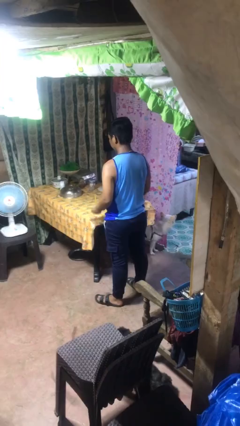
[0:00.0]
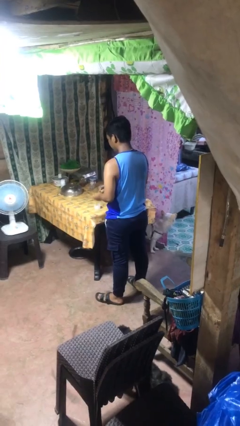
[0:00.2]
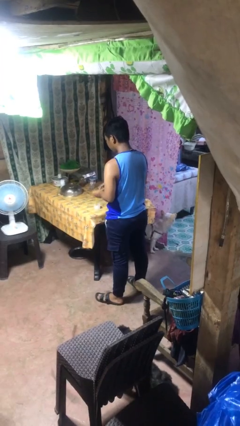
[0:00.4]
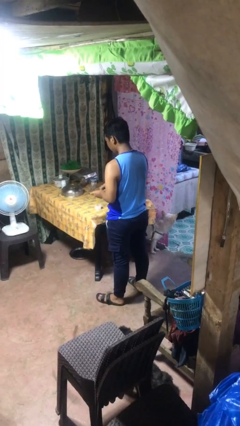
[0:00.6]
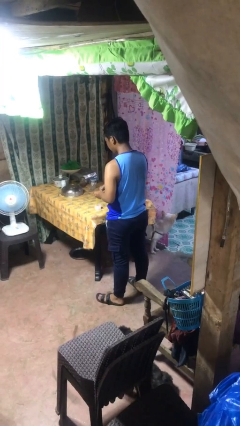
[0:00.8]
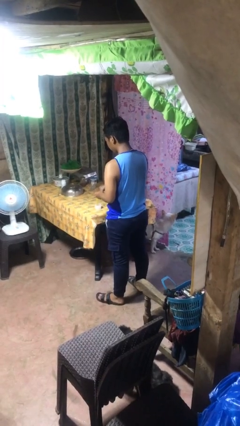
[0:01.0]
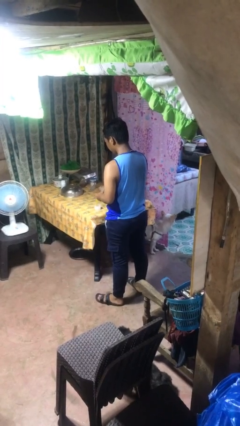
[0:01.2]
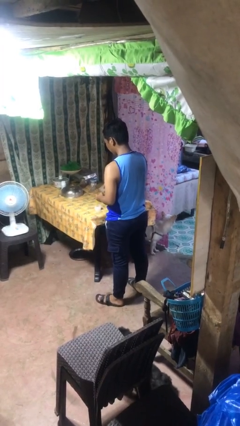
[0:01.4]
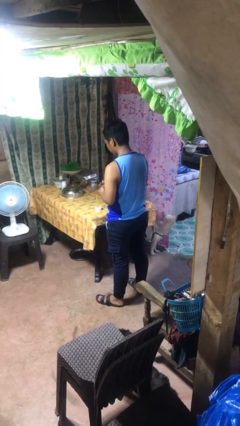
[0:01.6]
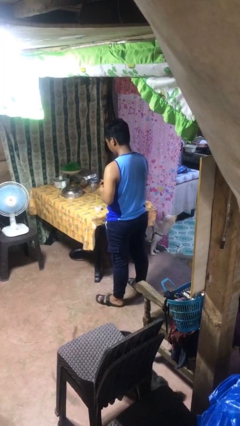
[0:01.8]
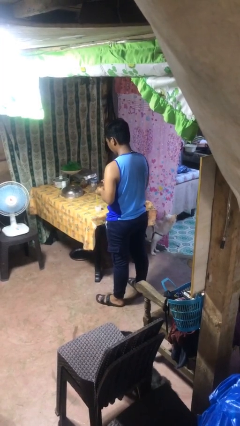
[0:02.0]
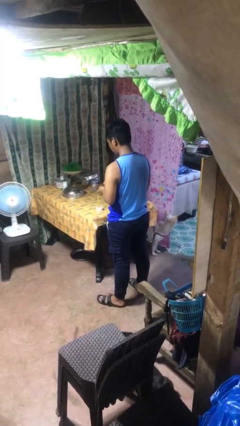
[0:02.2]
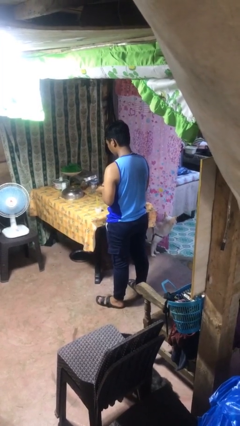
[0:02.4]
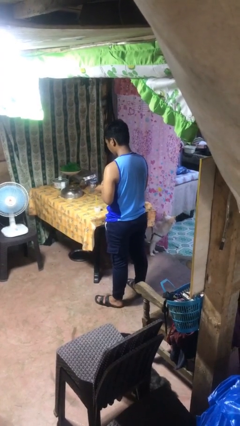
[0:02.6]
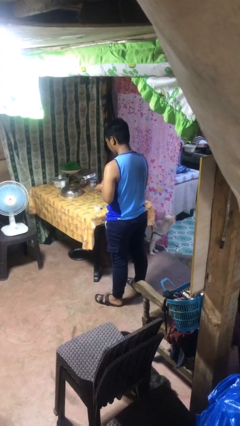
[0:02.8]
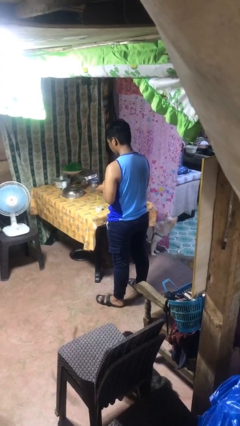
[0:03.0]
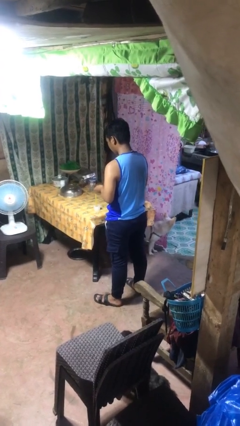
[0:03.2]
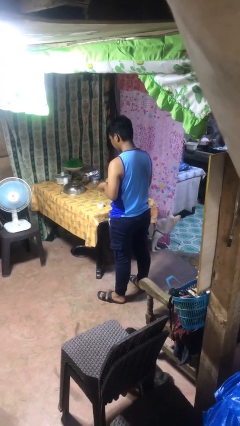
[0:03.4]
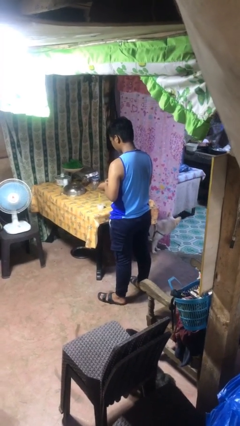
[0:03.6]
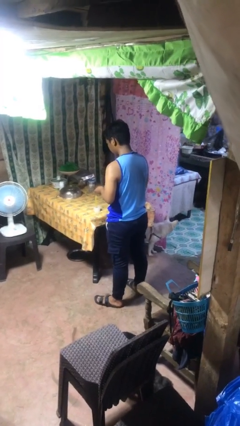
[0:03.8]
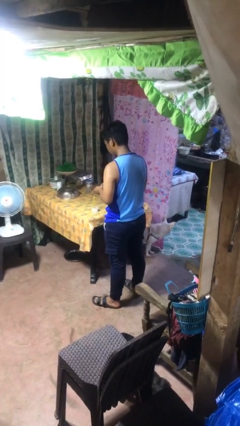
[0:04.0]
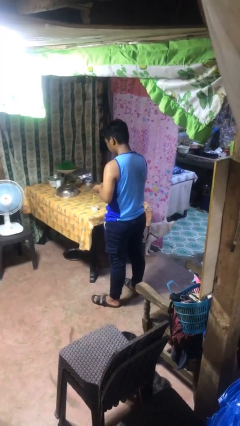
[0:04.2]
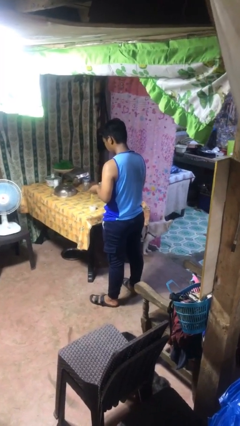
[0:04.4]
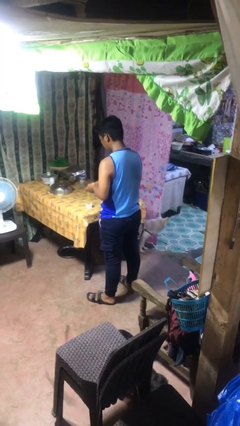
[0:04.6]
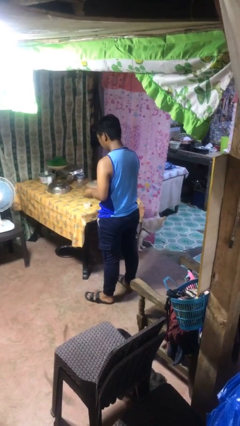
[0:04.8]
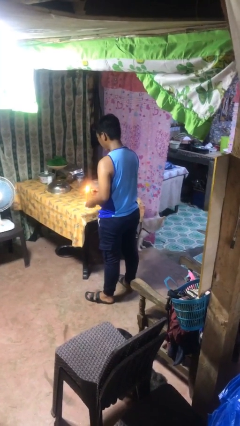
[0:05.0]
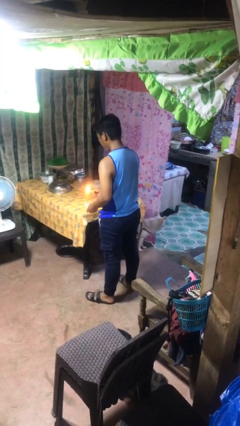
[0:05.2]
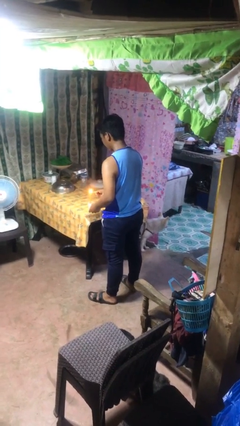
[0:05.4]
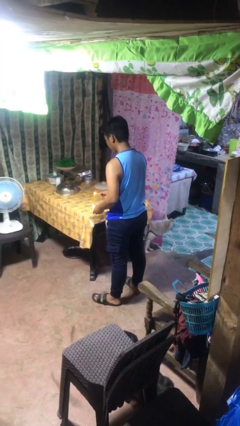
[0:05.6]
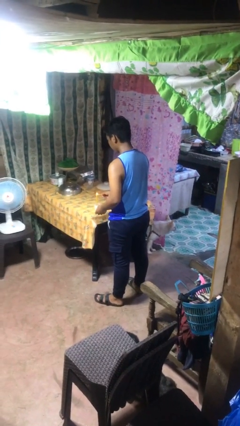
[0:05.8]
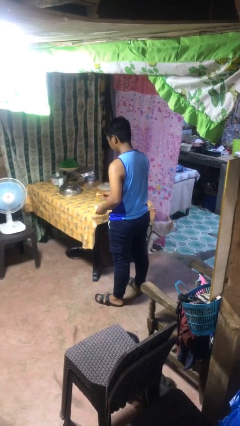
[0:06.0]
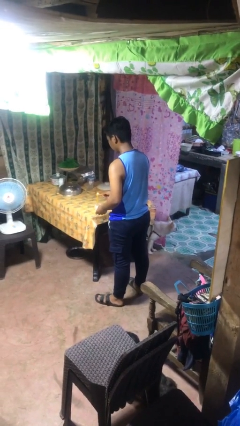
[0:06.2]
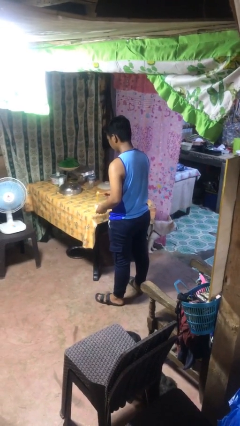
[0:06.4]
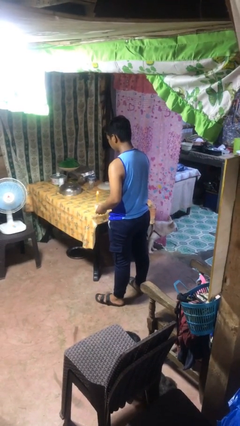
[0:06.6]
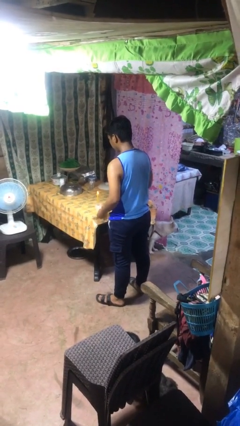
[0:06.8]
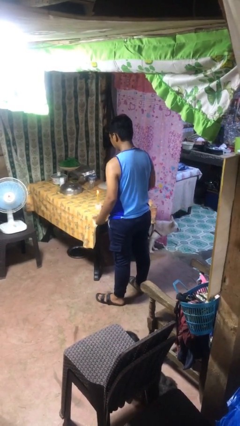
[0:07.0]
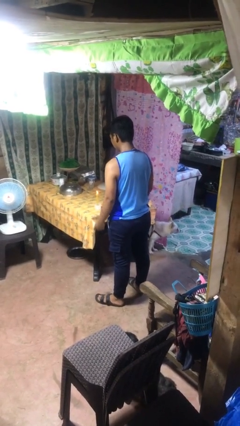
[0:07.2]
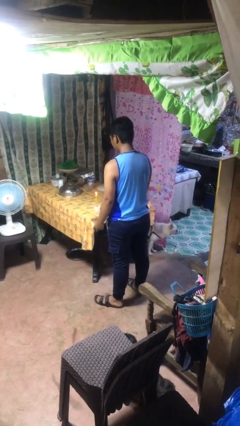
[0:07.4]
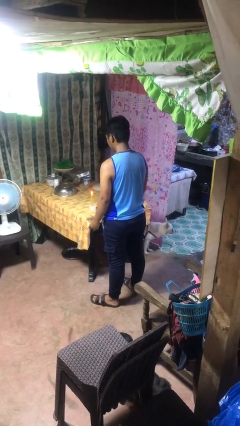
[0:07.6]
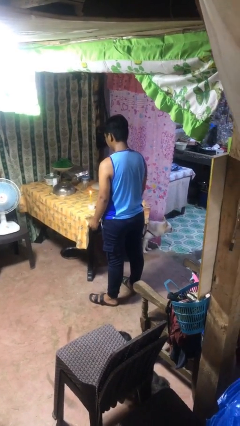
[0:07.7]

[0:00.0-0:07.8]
person lights candle

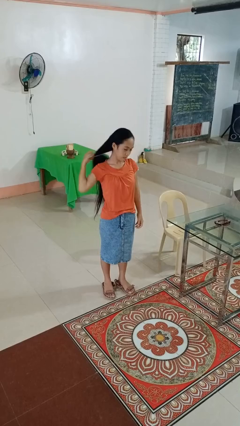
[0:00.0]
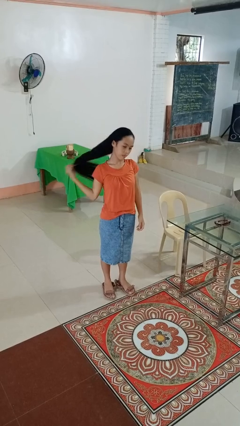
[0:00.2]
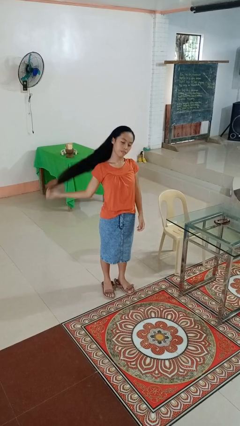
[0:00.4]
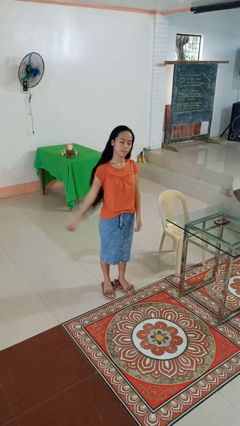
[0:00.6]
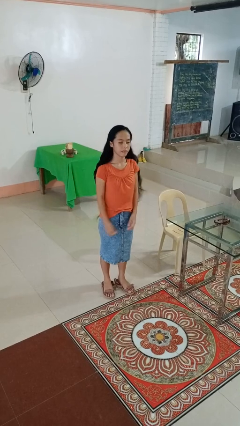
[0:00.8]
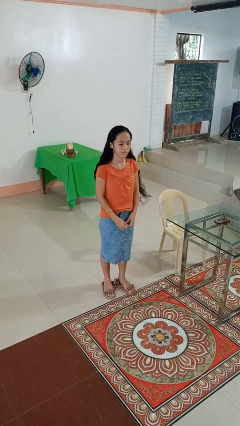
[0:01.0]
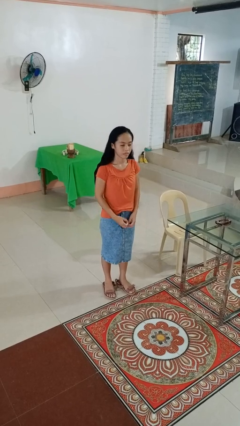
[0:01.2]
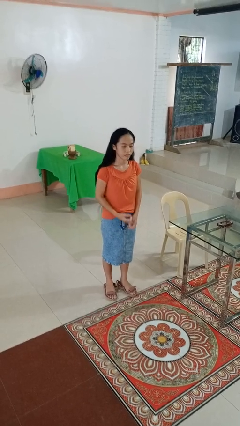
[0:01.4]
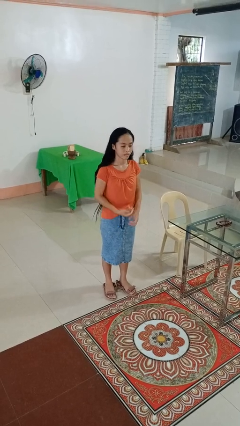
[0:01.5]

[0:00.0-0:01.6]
person takes off hairtie

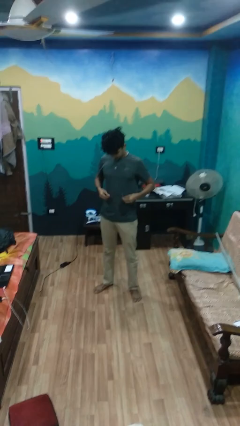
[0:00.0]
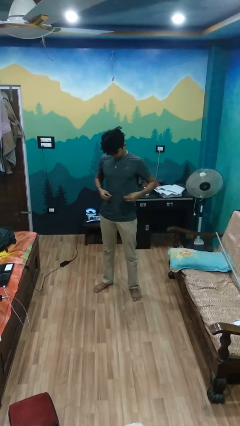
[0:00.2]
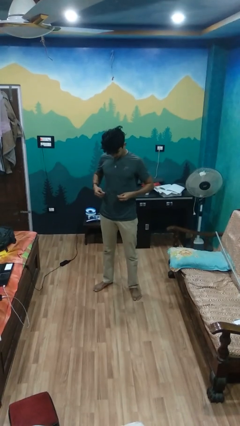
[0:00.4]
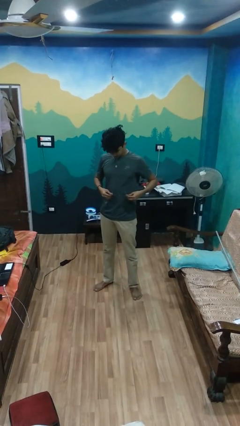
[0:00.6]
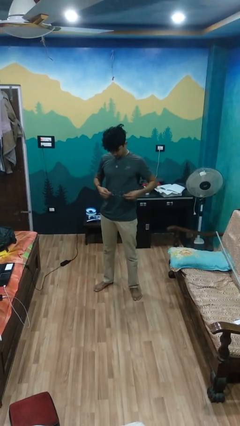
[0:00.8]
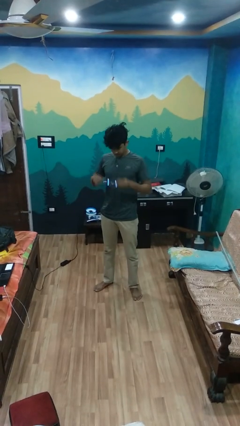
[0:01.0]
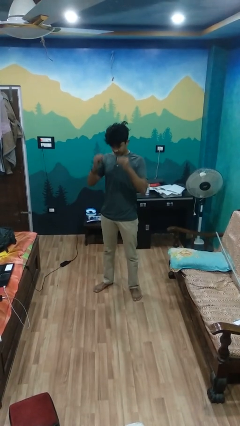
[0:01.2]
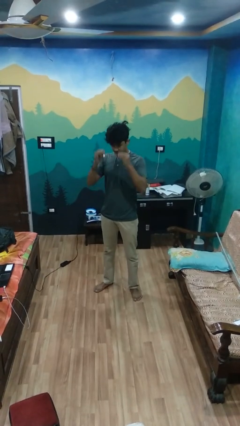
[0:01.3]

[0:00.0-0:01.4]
person cleans eyeglasses

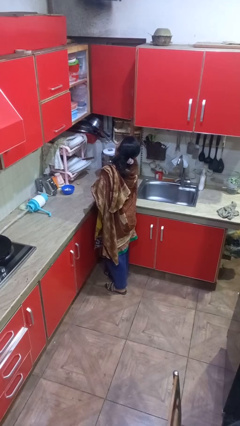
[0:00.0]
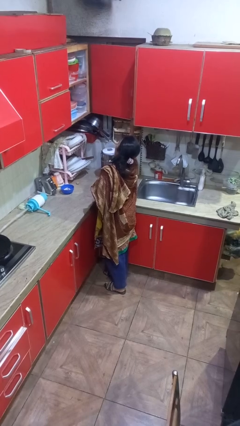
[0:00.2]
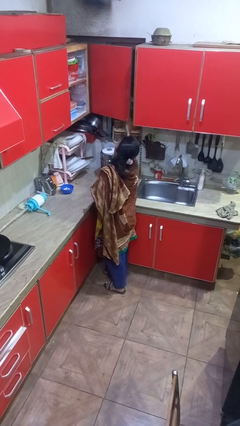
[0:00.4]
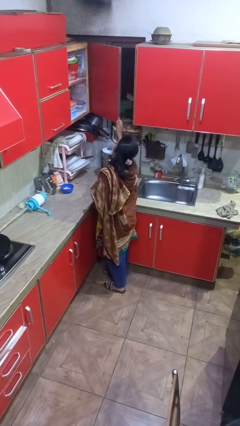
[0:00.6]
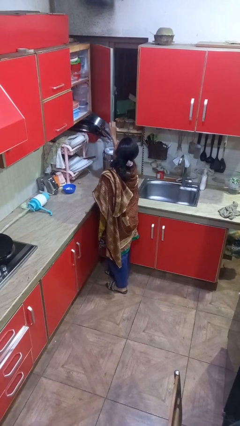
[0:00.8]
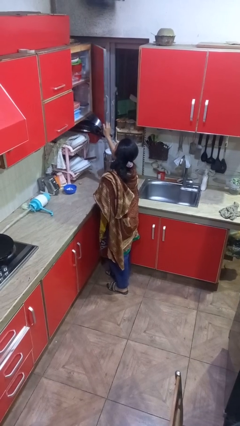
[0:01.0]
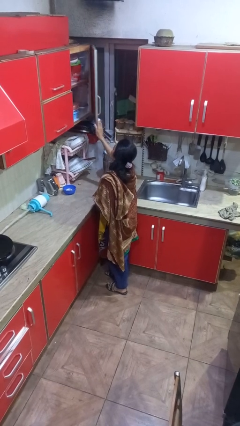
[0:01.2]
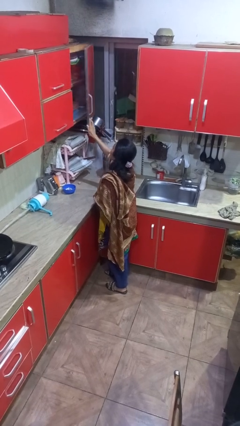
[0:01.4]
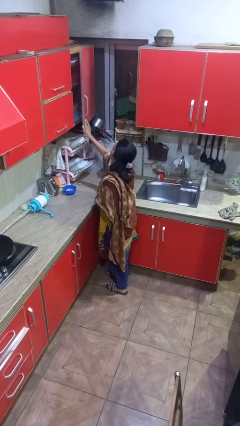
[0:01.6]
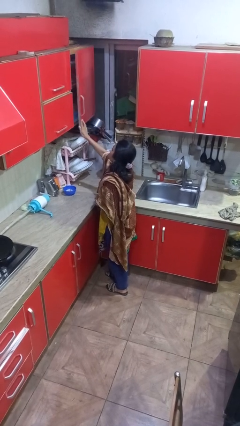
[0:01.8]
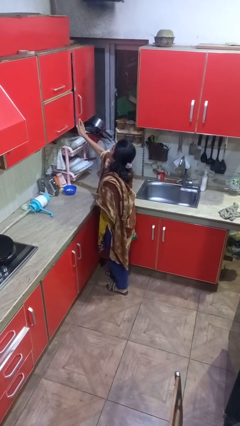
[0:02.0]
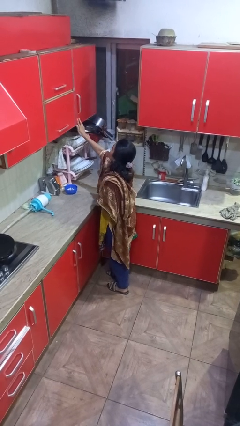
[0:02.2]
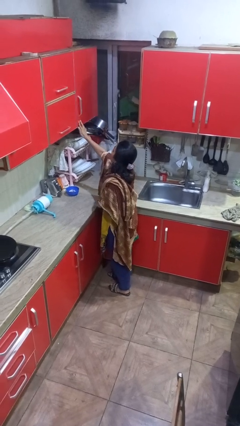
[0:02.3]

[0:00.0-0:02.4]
person closes cabinet

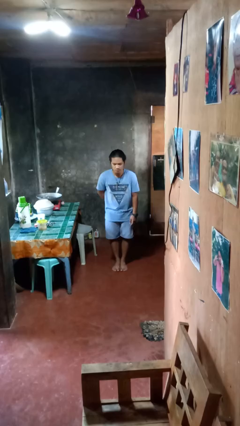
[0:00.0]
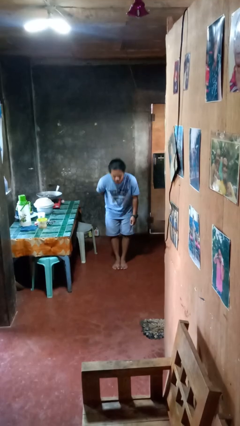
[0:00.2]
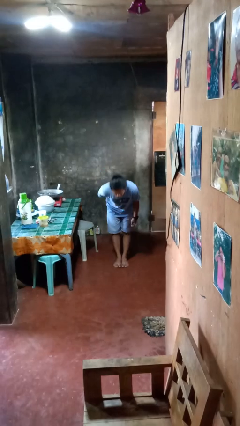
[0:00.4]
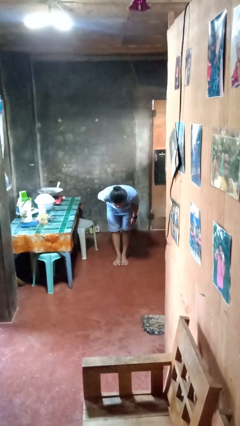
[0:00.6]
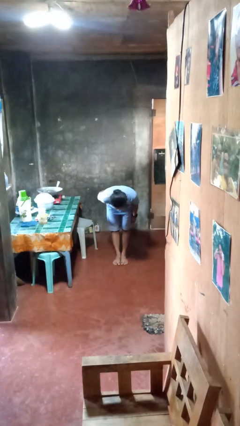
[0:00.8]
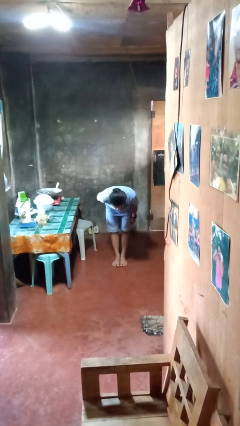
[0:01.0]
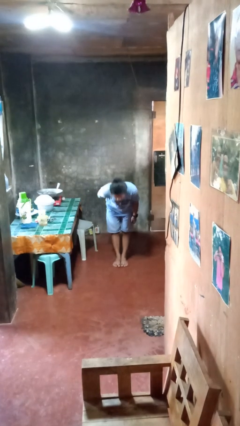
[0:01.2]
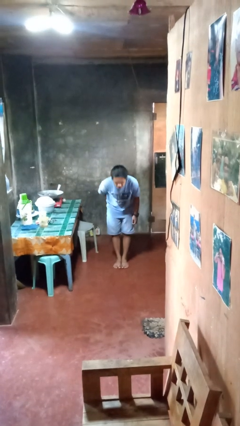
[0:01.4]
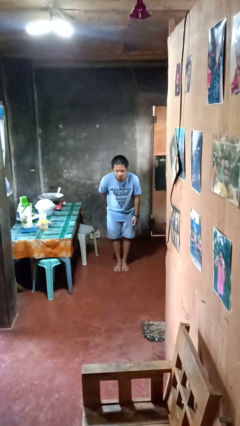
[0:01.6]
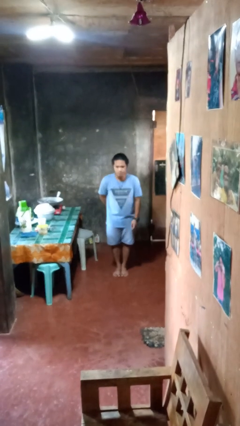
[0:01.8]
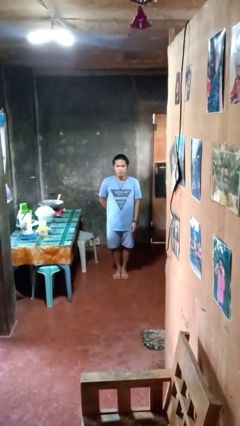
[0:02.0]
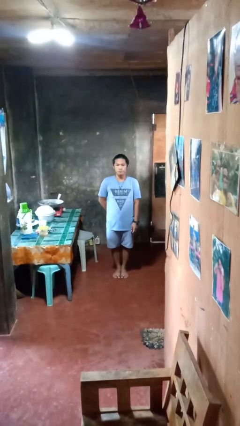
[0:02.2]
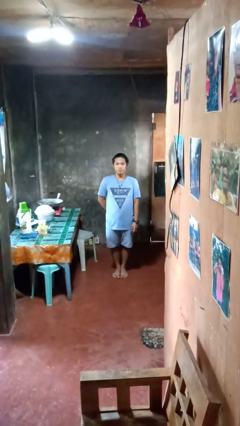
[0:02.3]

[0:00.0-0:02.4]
person bows

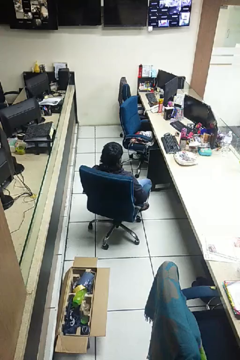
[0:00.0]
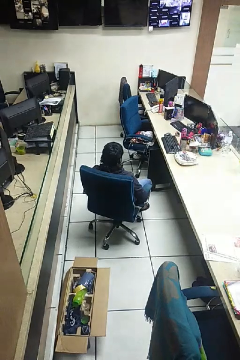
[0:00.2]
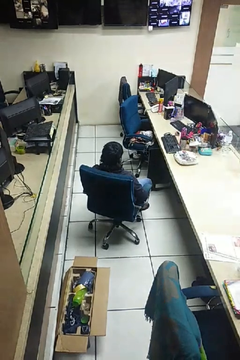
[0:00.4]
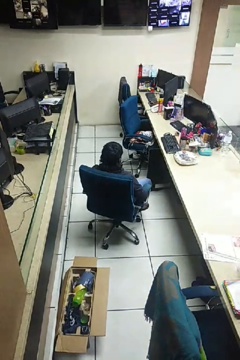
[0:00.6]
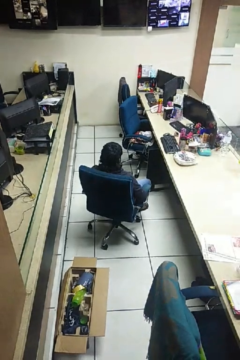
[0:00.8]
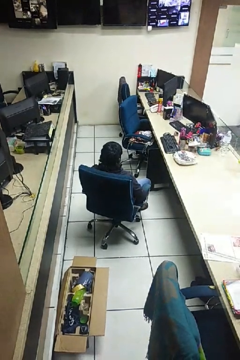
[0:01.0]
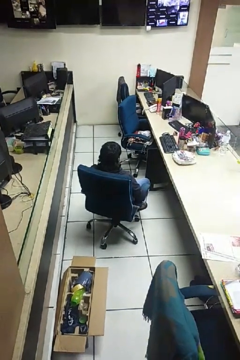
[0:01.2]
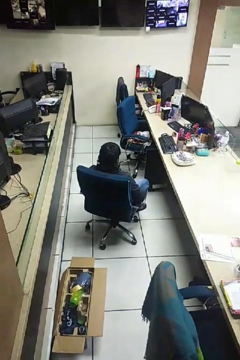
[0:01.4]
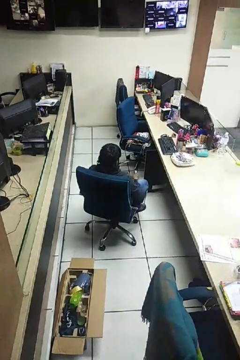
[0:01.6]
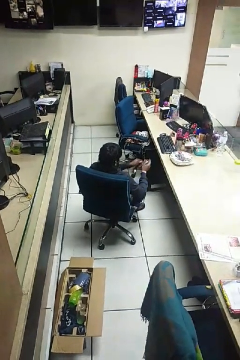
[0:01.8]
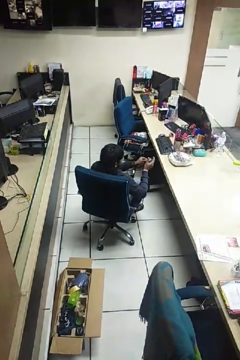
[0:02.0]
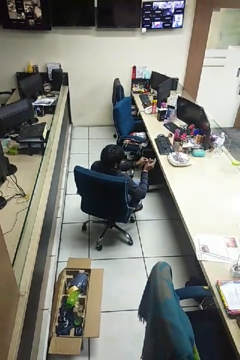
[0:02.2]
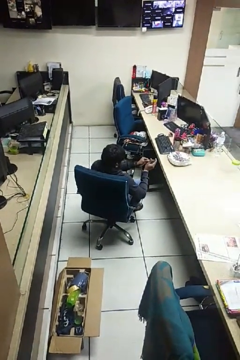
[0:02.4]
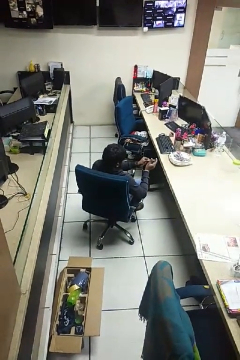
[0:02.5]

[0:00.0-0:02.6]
person clips fingernails
